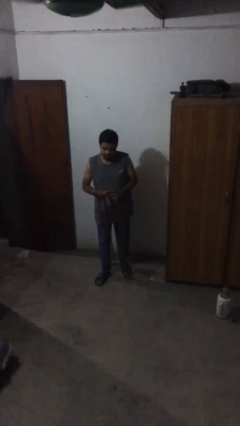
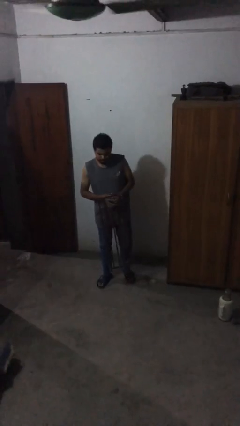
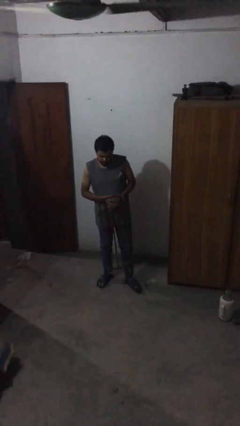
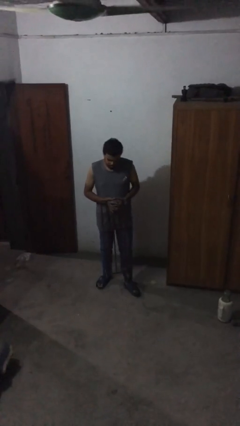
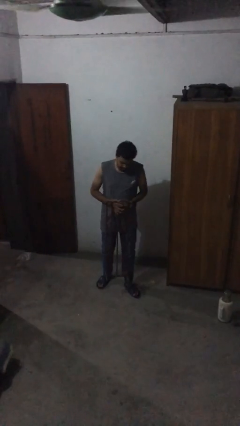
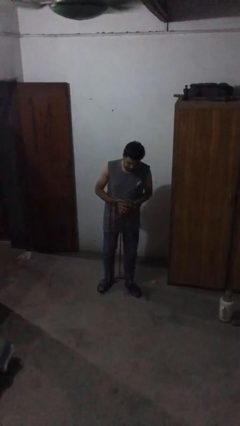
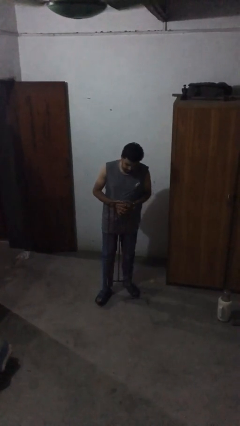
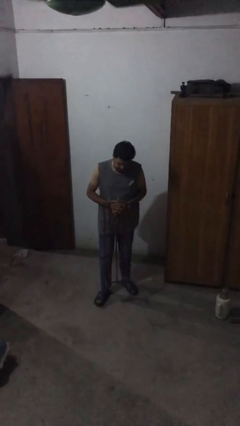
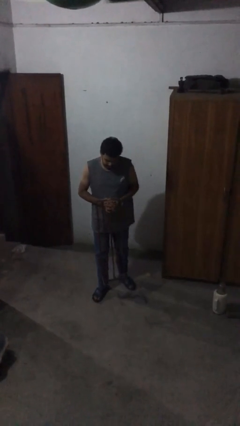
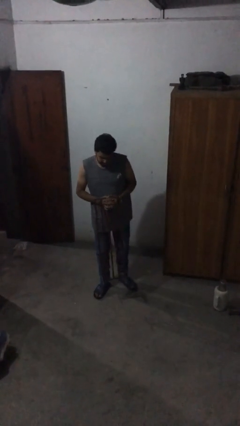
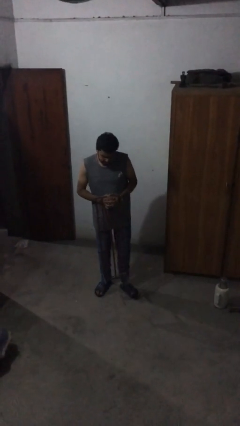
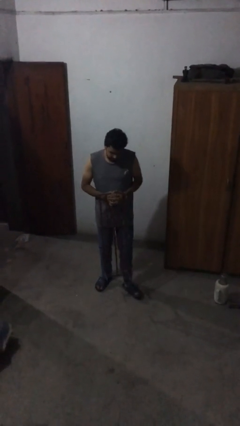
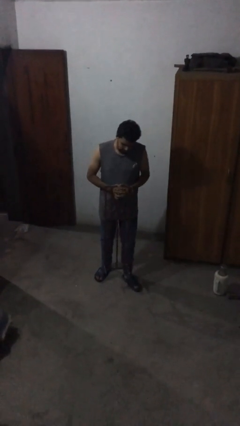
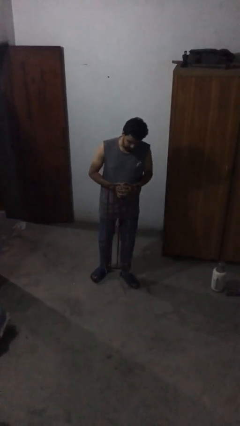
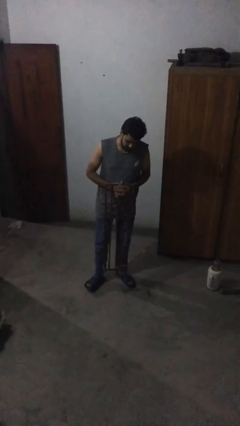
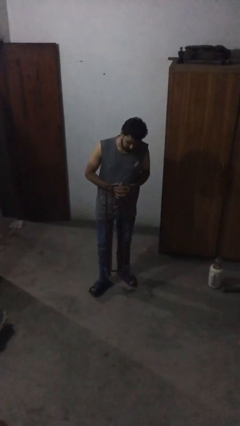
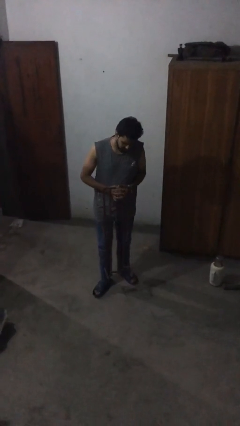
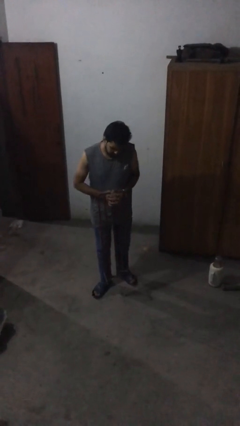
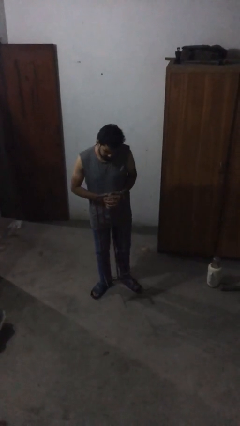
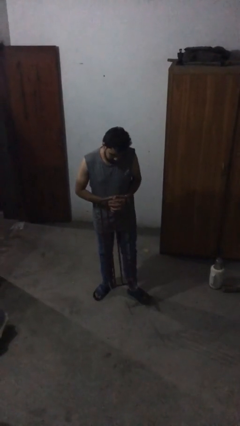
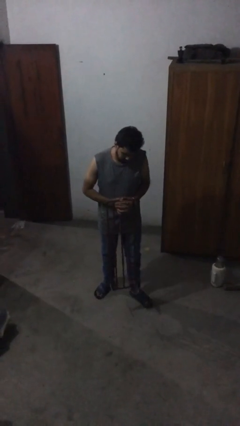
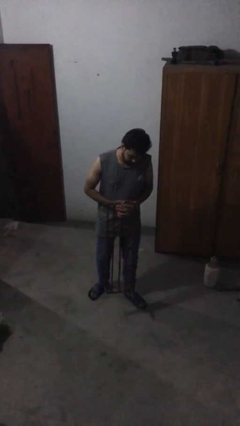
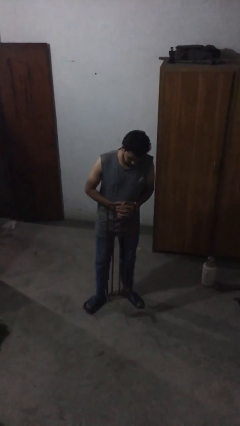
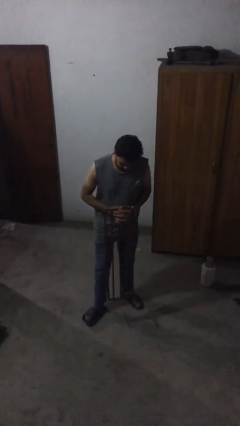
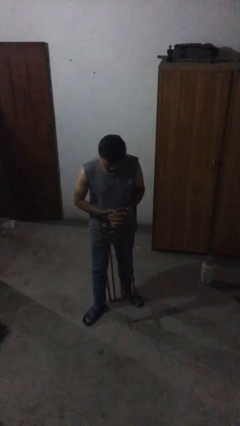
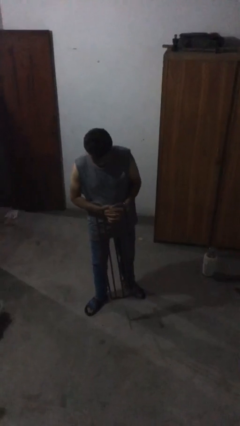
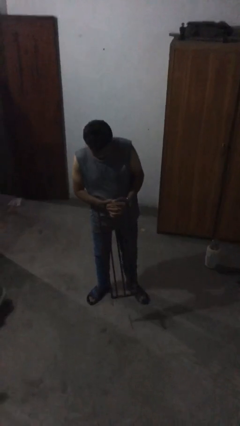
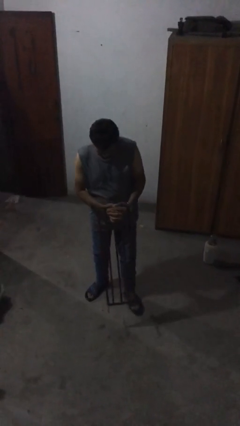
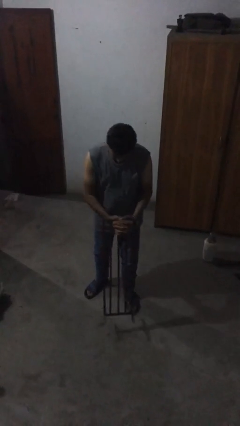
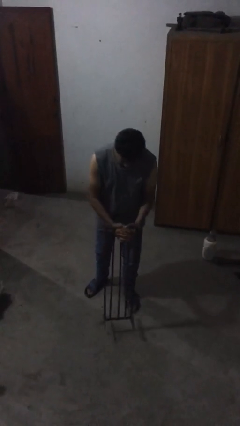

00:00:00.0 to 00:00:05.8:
person carries heavy object

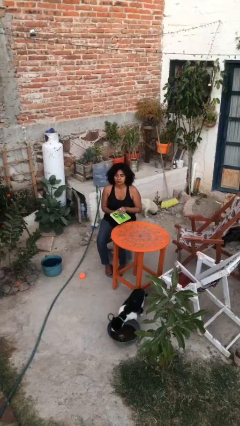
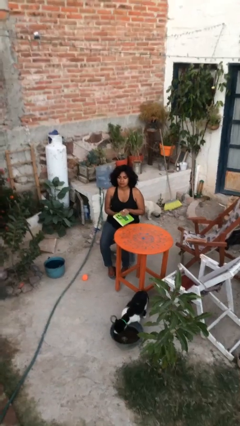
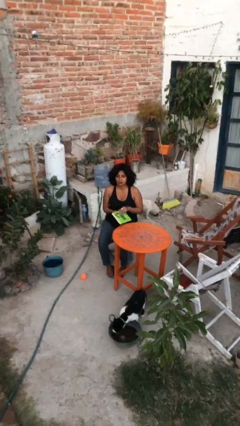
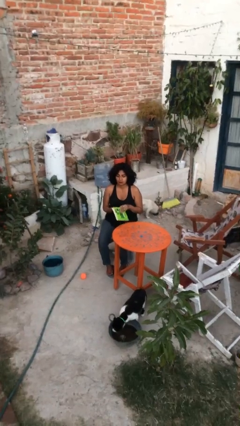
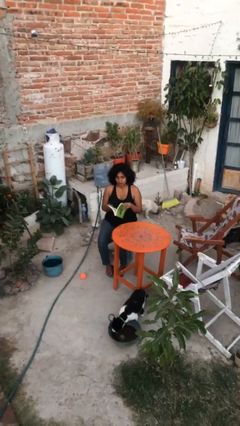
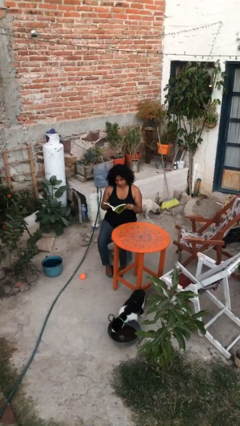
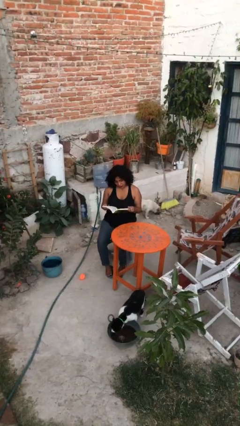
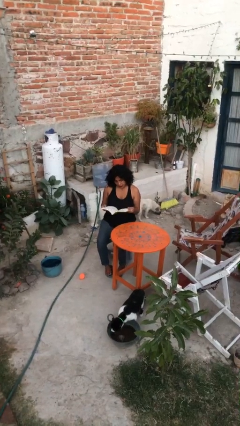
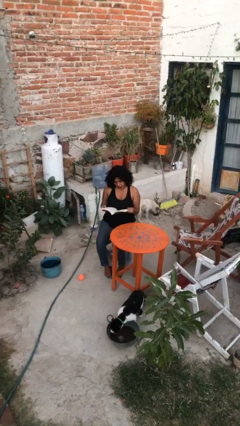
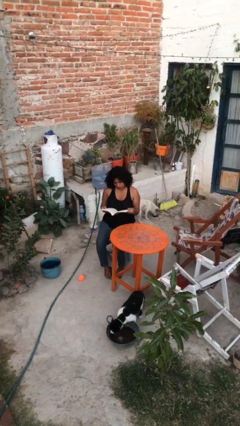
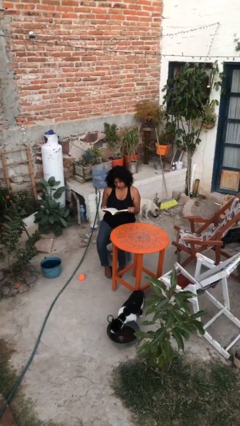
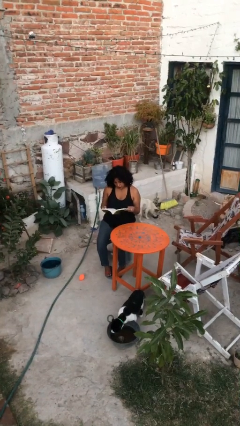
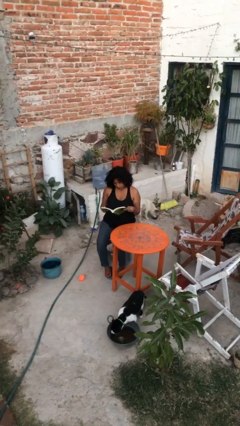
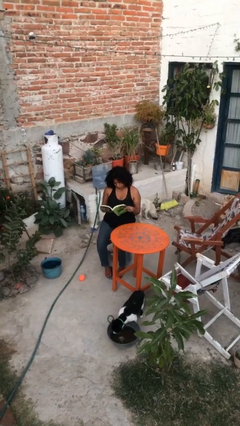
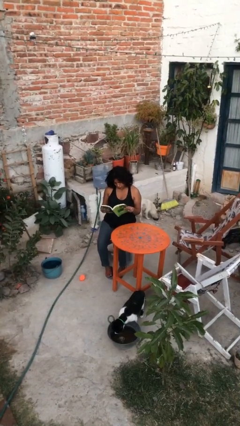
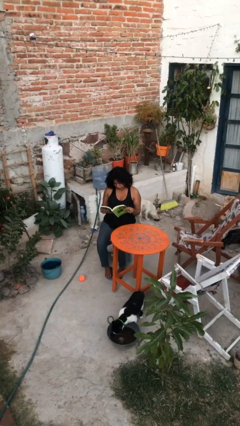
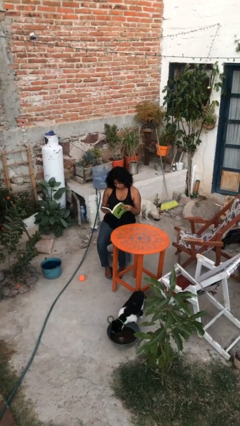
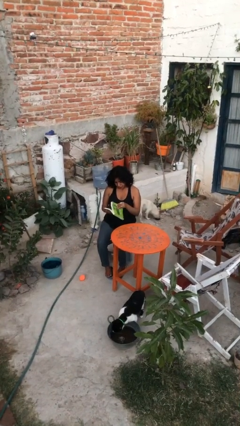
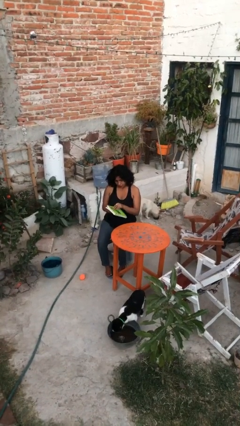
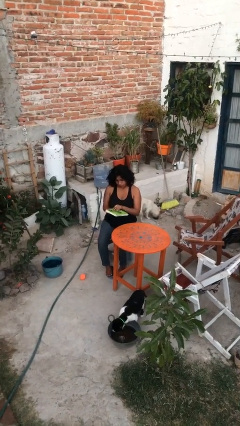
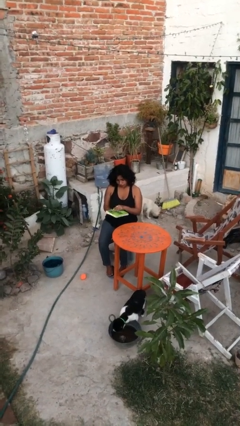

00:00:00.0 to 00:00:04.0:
person reads document

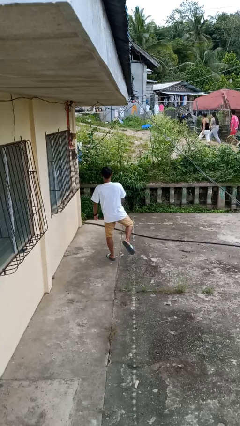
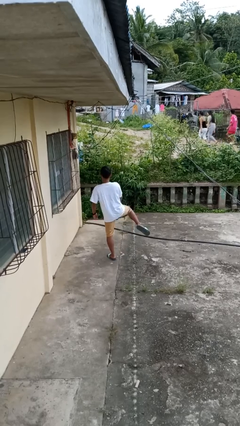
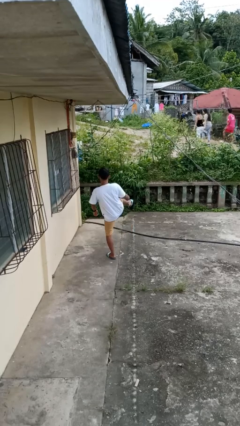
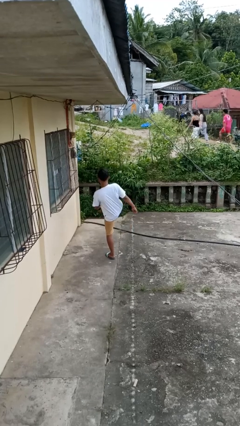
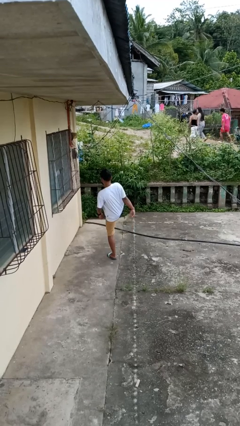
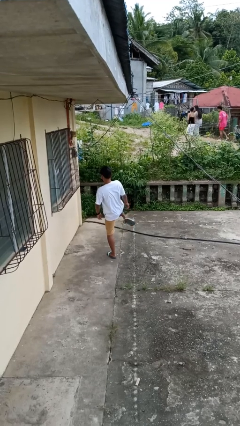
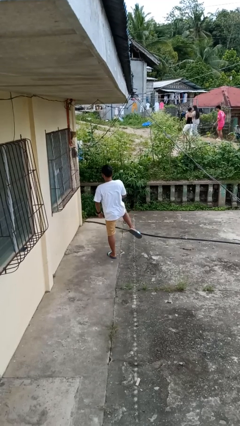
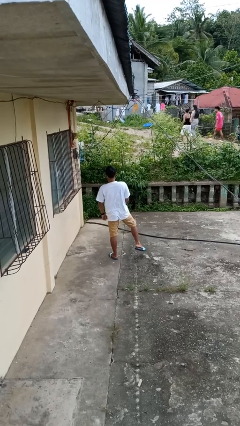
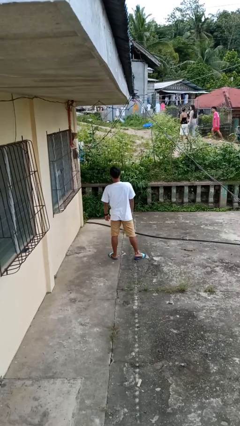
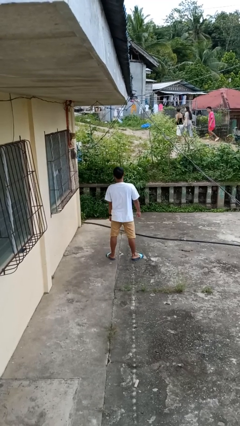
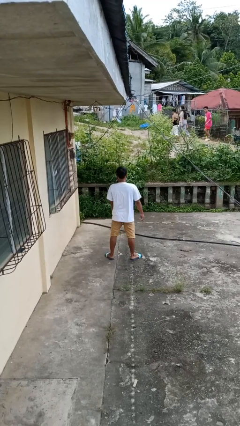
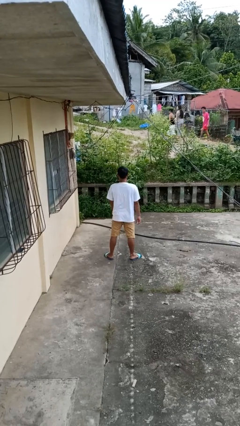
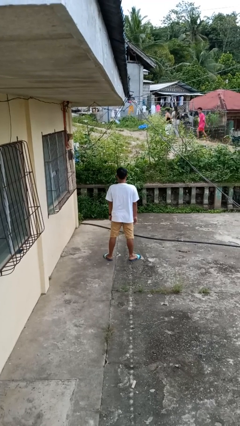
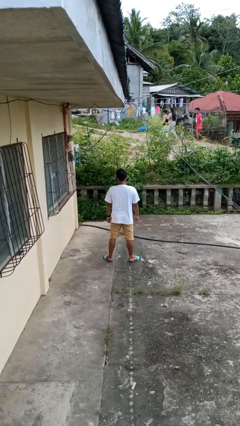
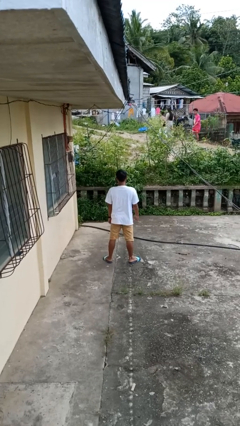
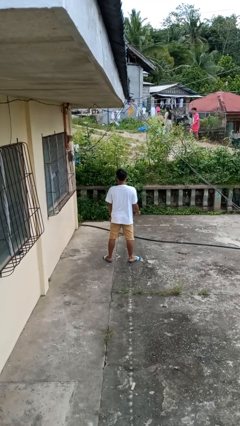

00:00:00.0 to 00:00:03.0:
person karate kicks

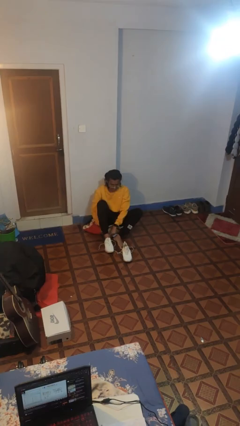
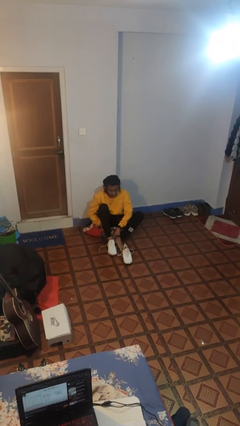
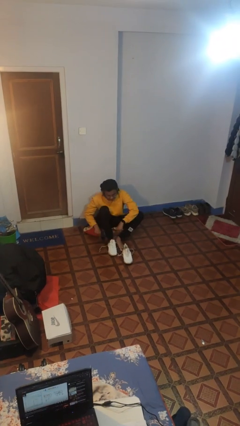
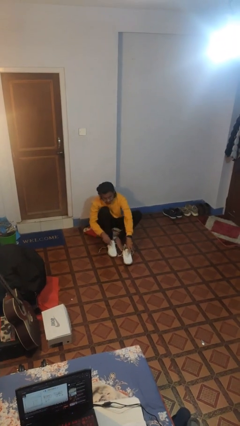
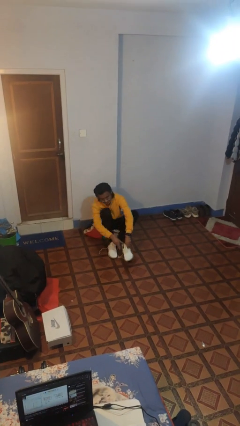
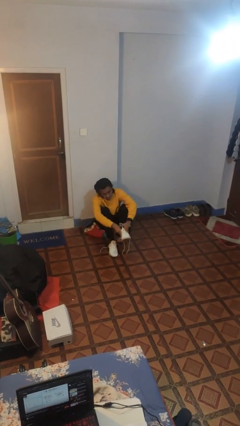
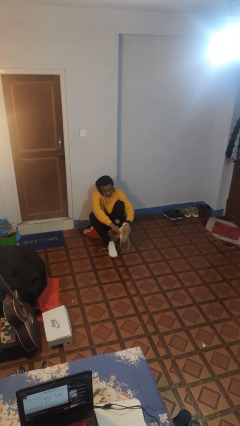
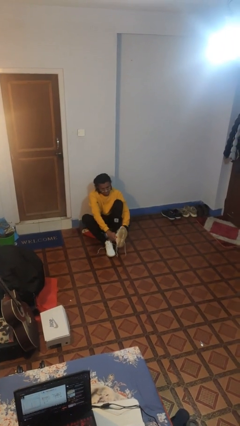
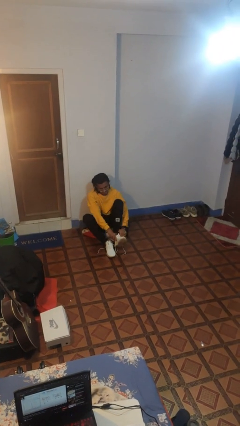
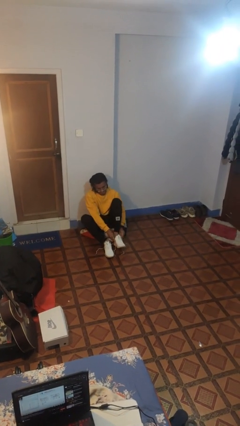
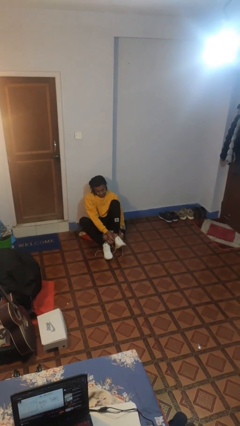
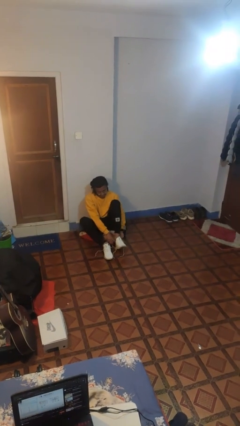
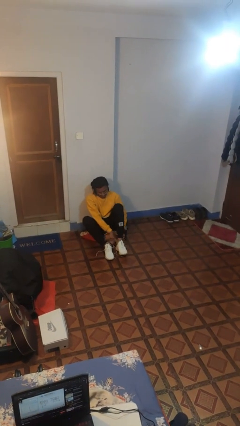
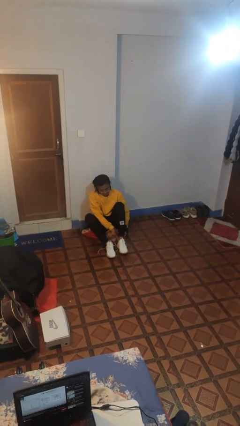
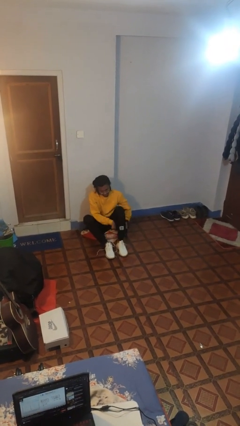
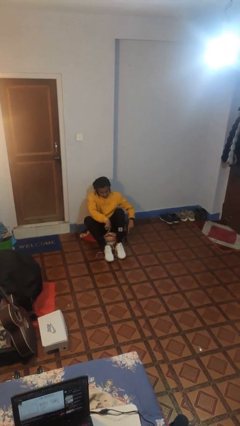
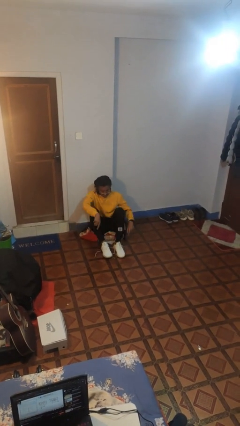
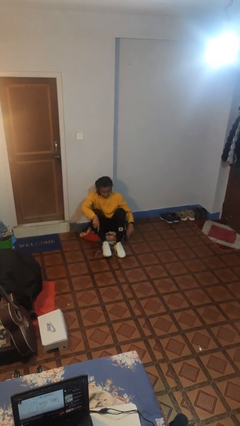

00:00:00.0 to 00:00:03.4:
person puts on shoes

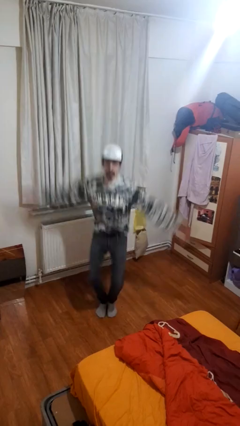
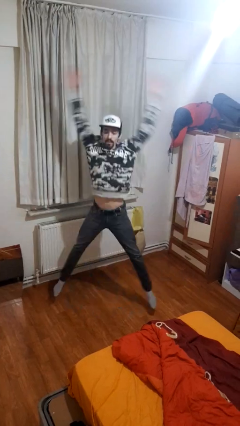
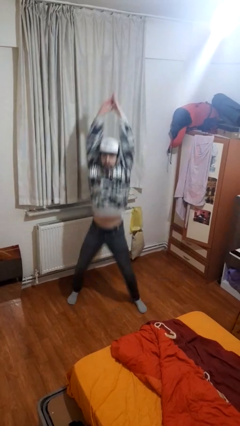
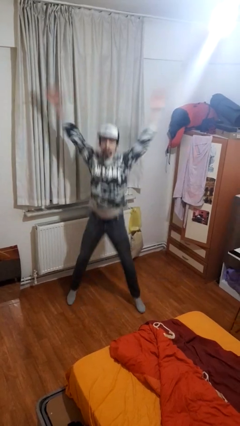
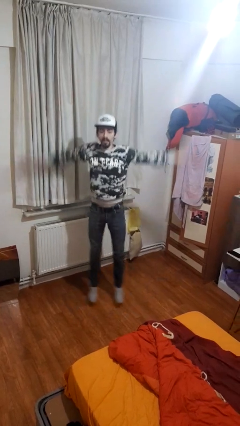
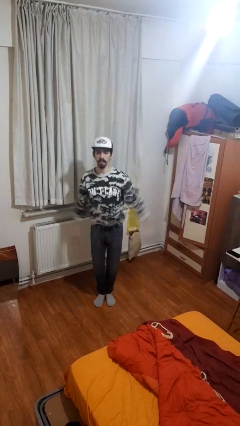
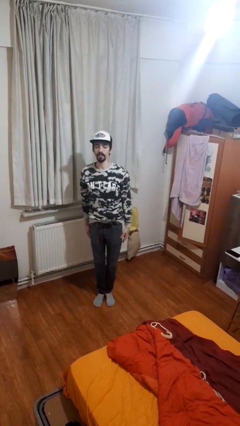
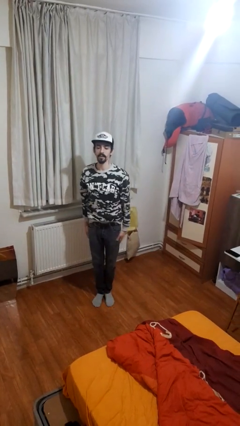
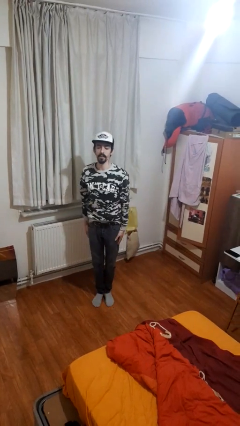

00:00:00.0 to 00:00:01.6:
person exercises with jumping jacks
